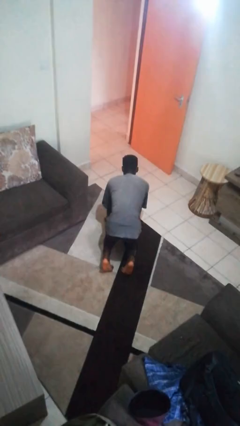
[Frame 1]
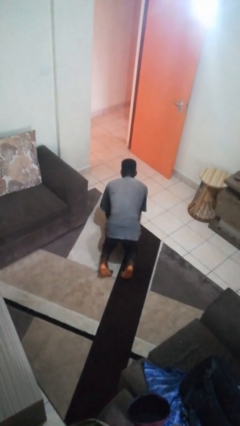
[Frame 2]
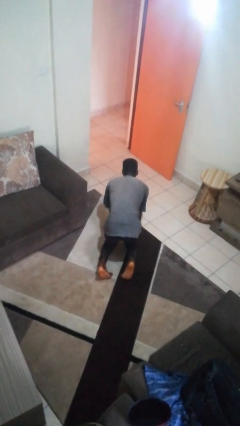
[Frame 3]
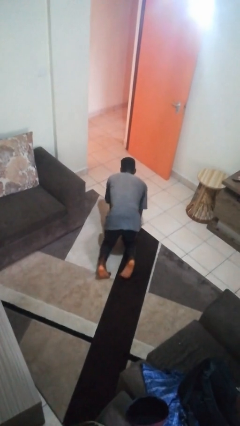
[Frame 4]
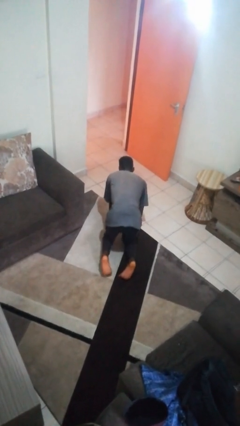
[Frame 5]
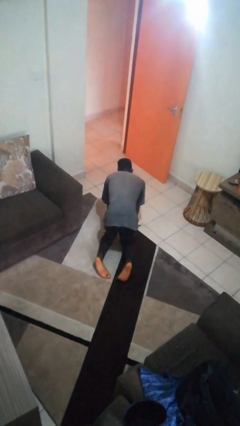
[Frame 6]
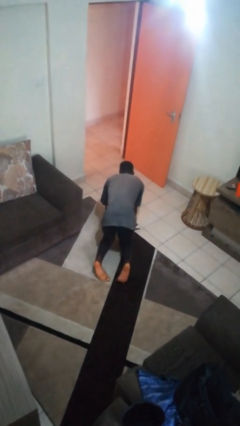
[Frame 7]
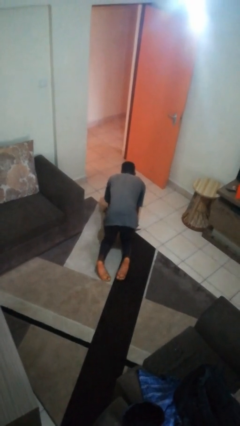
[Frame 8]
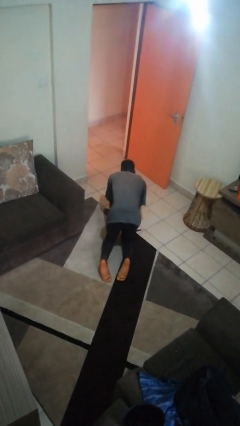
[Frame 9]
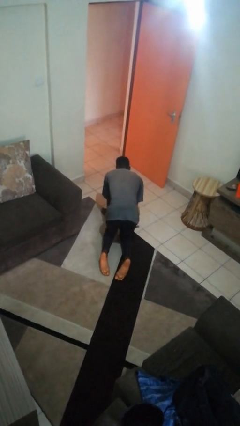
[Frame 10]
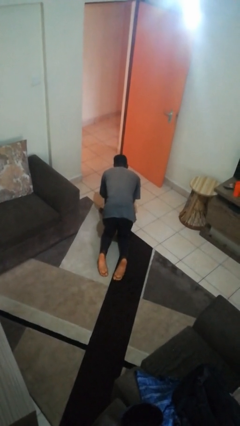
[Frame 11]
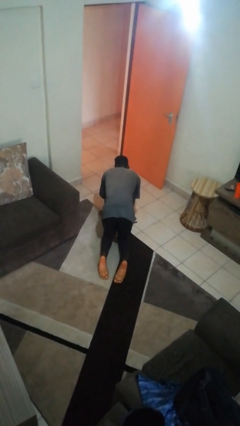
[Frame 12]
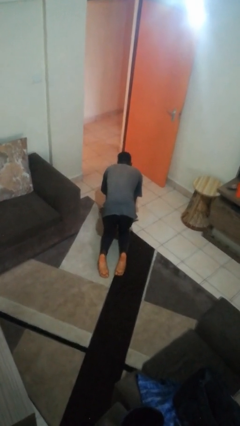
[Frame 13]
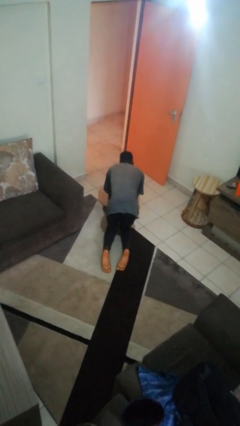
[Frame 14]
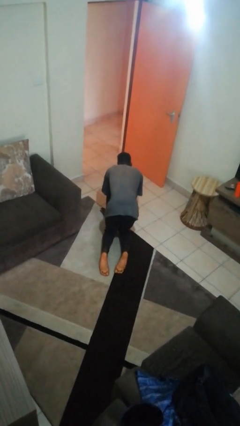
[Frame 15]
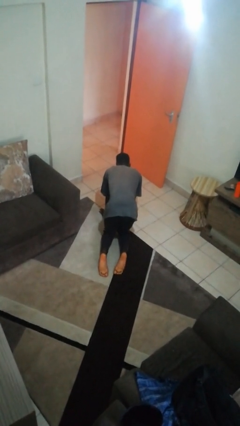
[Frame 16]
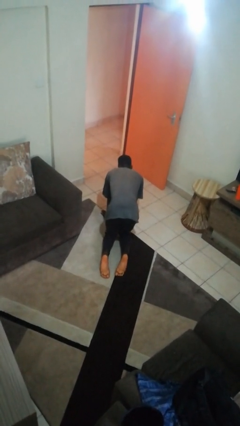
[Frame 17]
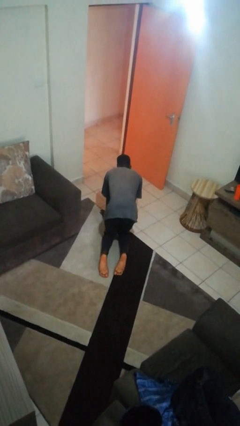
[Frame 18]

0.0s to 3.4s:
person crawls

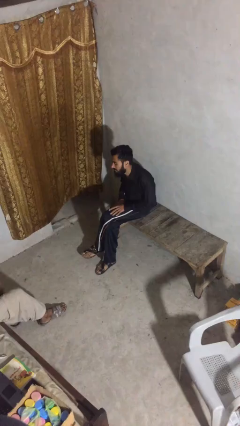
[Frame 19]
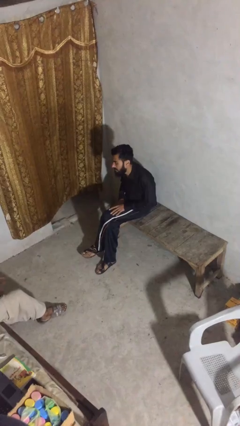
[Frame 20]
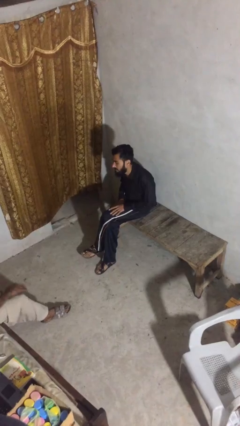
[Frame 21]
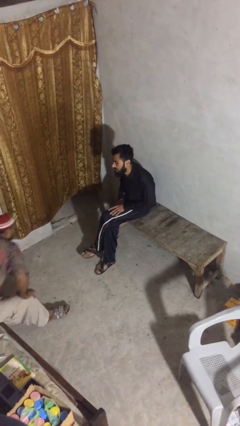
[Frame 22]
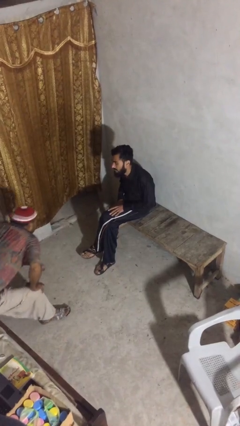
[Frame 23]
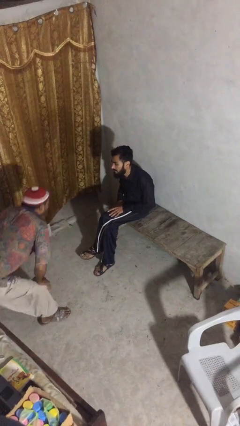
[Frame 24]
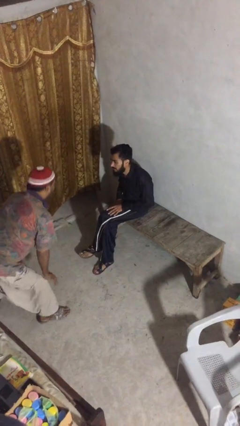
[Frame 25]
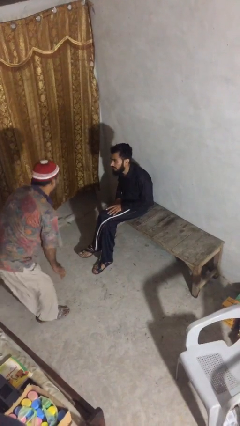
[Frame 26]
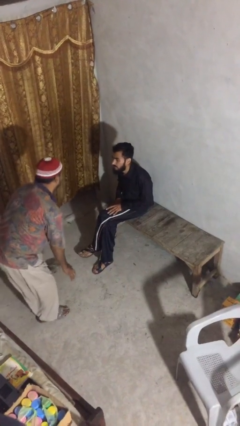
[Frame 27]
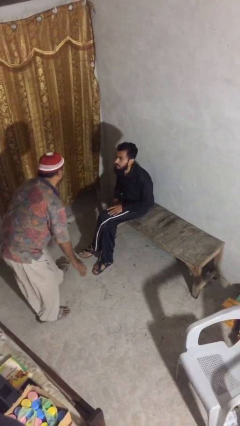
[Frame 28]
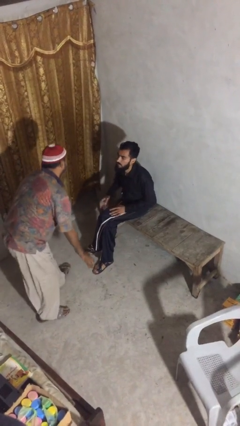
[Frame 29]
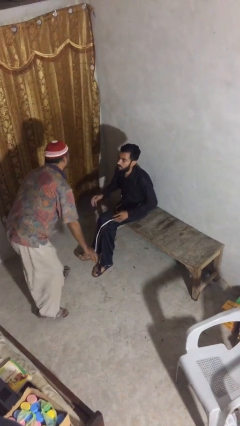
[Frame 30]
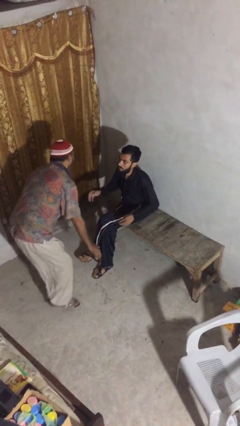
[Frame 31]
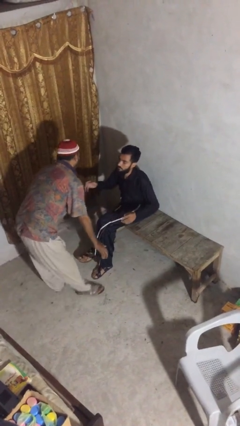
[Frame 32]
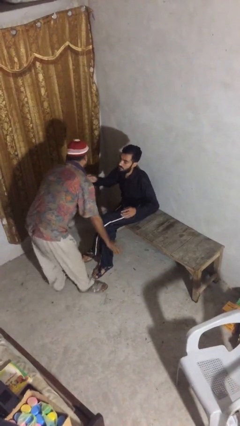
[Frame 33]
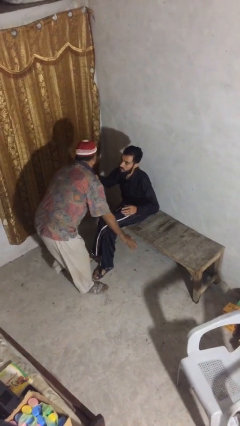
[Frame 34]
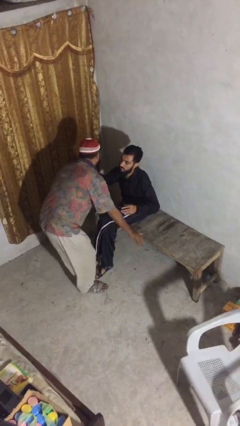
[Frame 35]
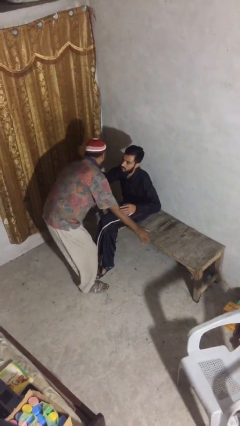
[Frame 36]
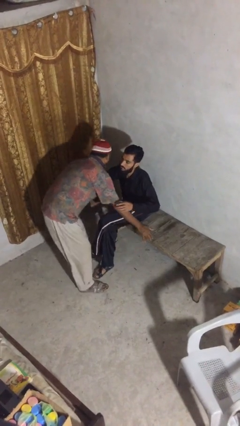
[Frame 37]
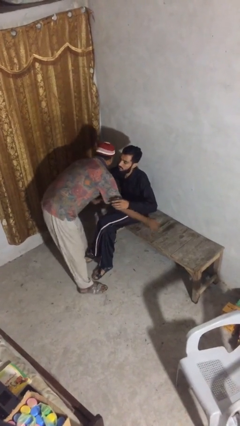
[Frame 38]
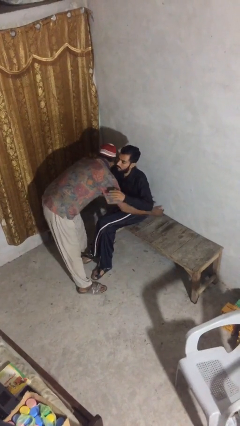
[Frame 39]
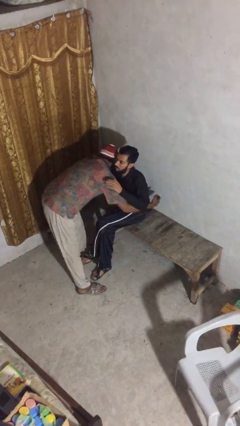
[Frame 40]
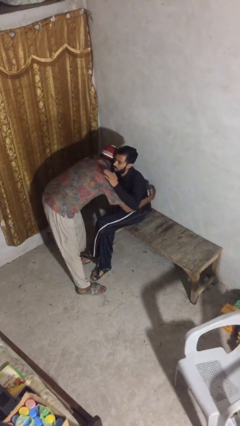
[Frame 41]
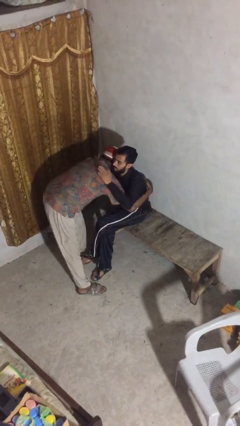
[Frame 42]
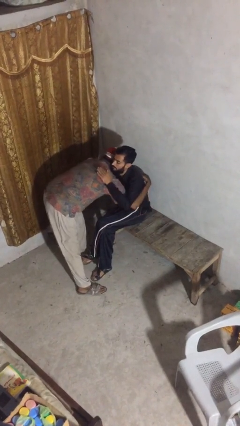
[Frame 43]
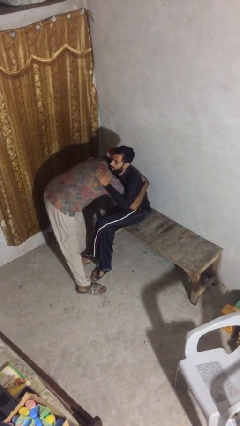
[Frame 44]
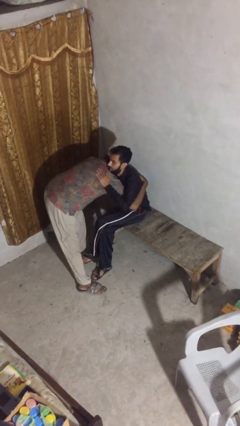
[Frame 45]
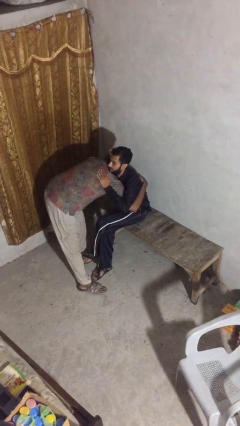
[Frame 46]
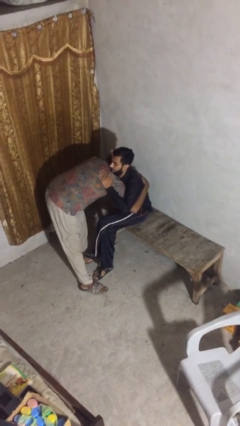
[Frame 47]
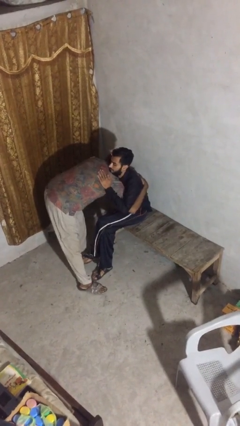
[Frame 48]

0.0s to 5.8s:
person embraces person

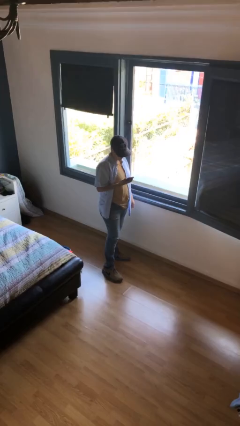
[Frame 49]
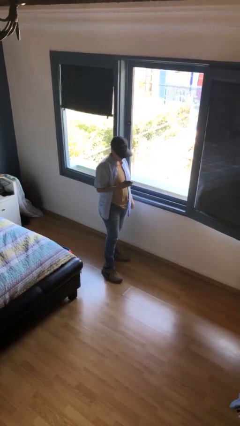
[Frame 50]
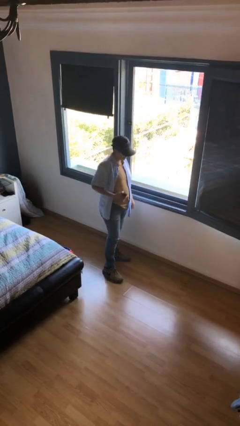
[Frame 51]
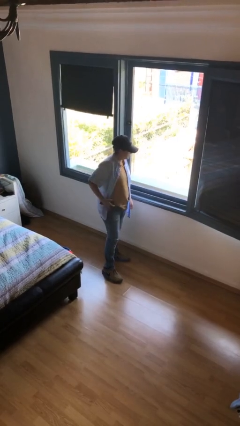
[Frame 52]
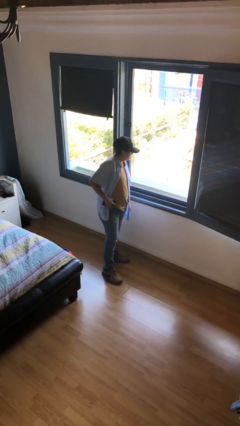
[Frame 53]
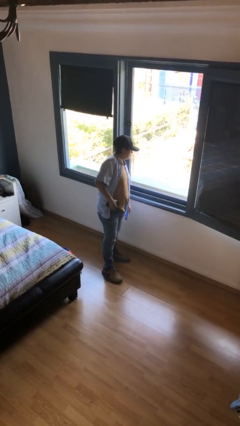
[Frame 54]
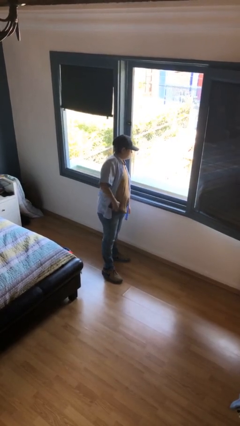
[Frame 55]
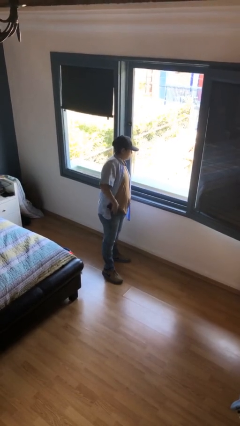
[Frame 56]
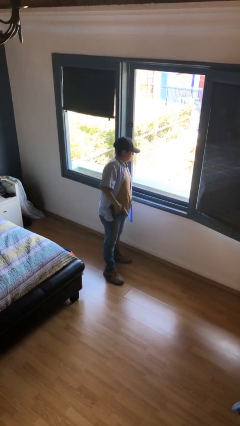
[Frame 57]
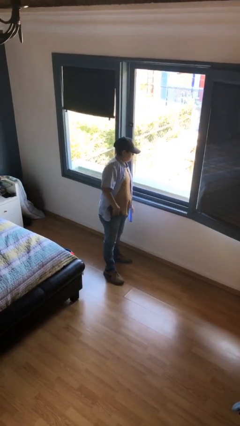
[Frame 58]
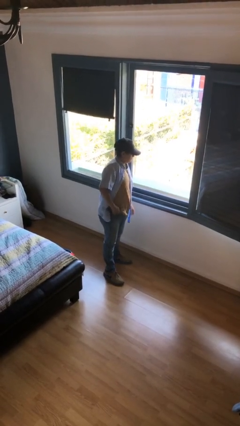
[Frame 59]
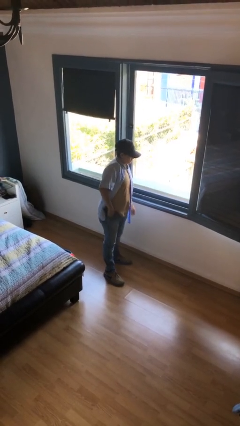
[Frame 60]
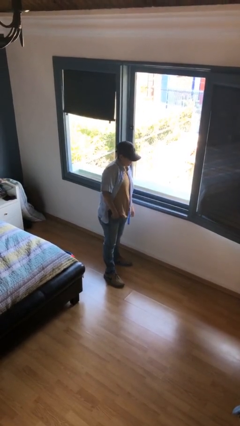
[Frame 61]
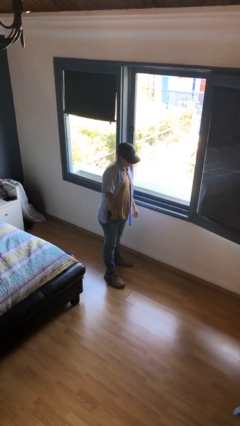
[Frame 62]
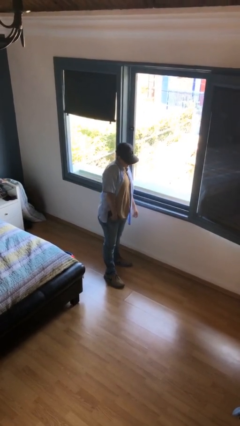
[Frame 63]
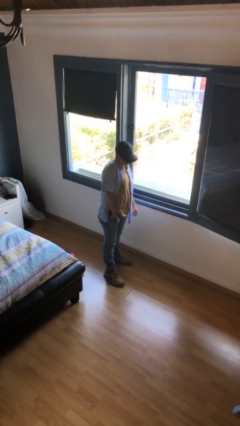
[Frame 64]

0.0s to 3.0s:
person puts phone into pocket

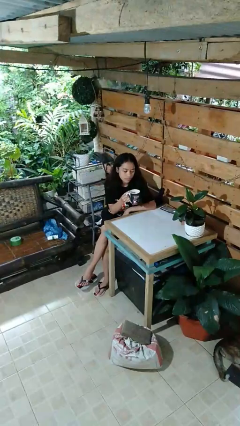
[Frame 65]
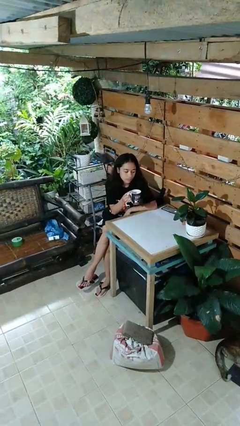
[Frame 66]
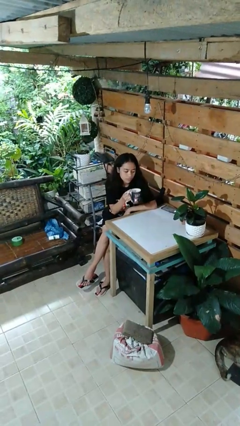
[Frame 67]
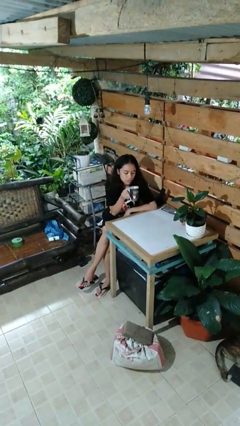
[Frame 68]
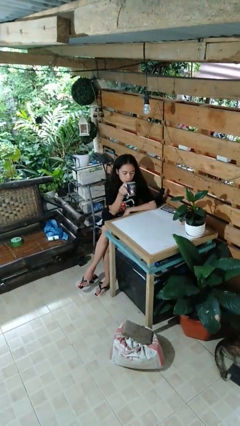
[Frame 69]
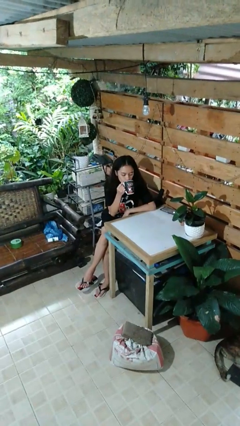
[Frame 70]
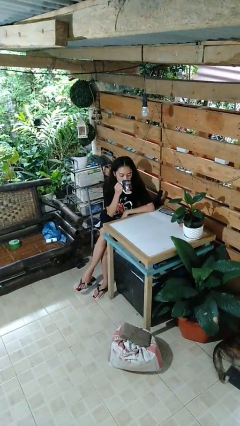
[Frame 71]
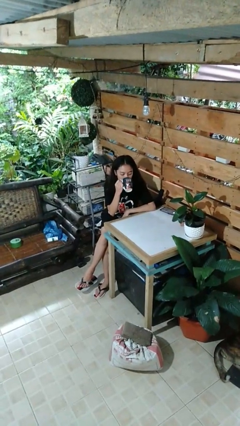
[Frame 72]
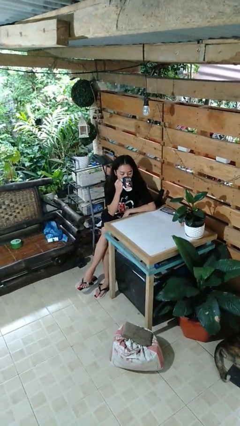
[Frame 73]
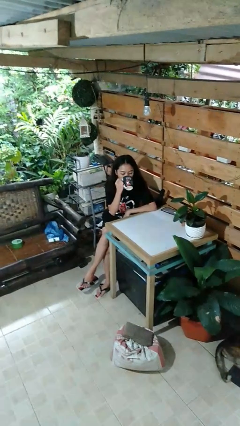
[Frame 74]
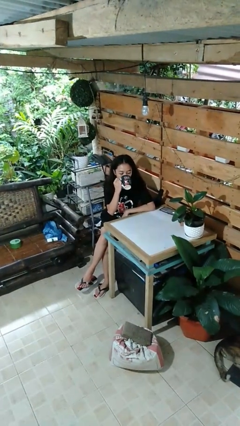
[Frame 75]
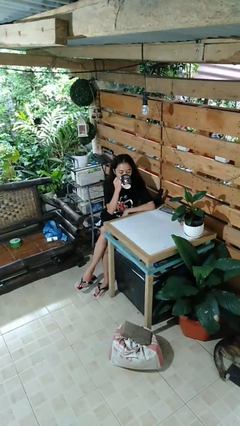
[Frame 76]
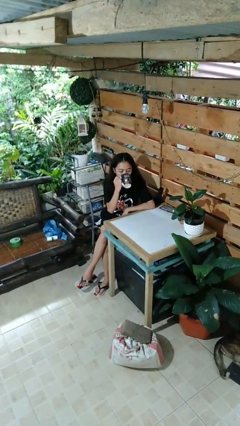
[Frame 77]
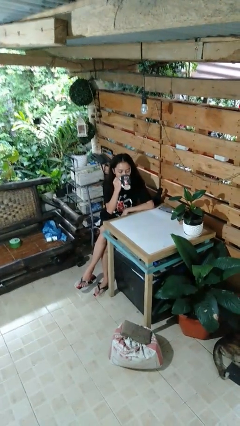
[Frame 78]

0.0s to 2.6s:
person drinks from mug

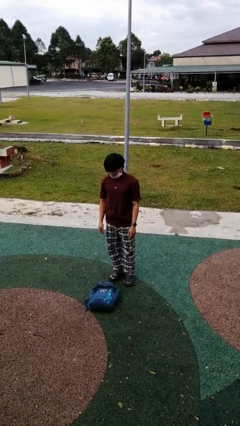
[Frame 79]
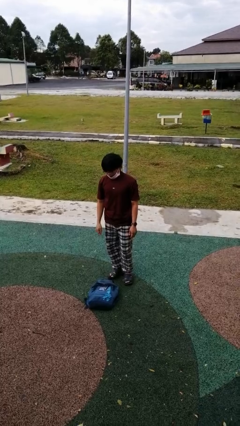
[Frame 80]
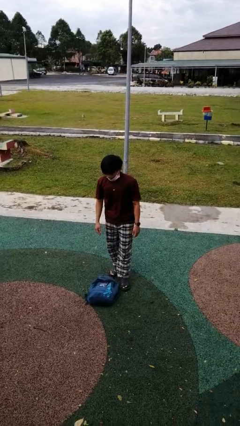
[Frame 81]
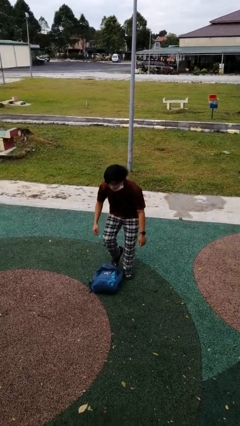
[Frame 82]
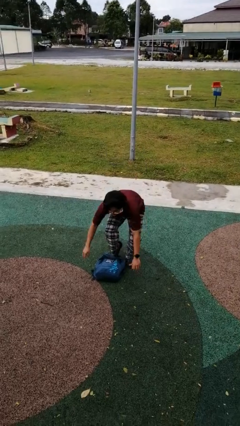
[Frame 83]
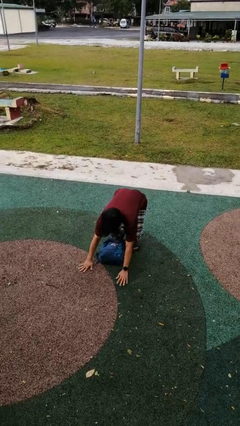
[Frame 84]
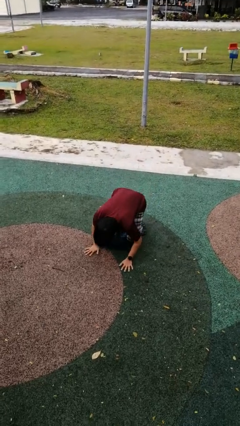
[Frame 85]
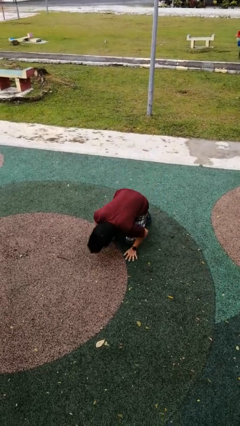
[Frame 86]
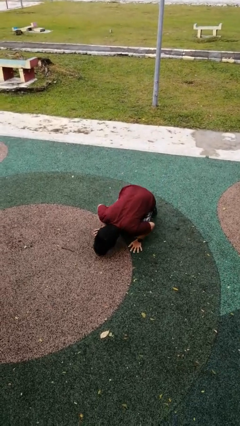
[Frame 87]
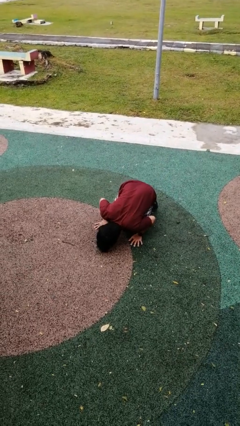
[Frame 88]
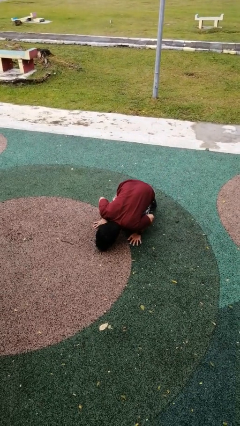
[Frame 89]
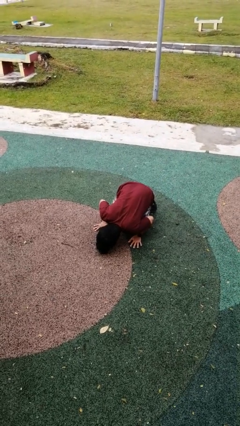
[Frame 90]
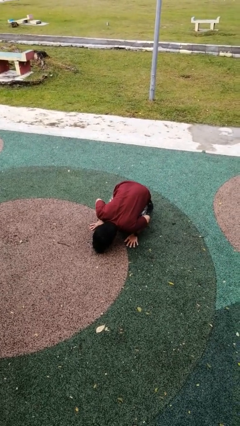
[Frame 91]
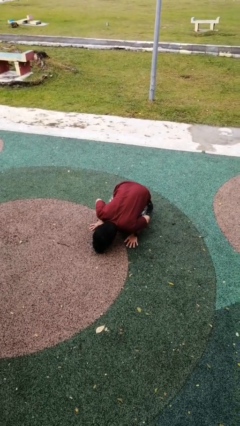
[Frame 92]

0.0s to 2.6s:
person trips on object on floor

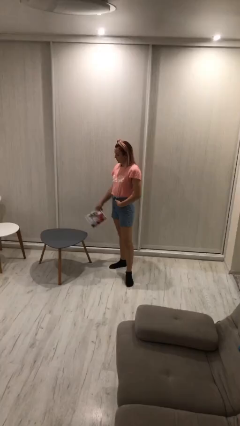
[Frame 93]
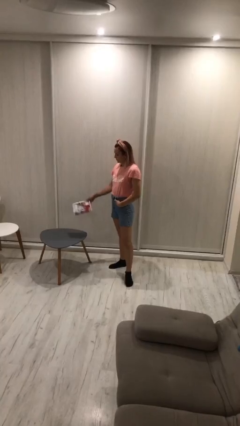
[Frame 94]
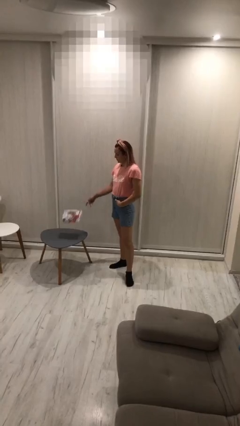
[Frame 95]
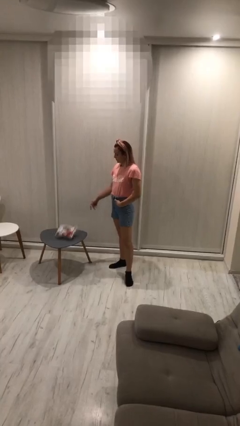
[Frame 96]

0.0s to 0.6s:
person throws object on table
